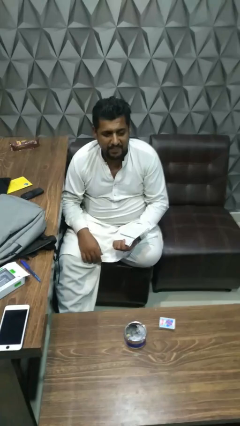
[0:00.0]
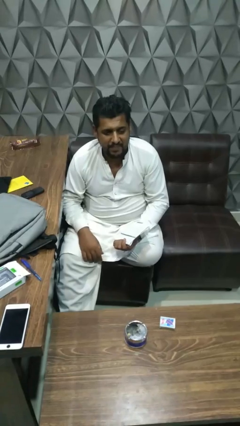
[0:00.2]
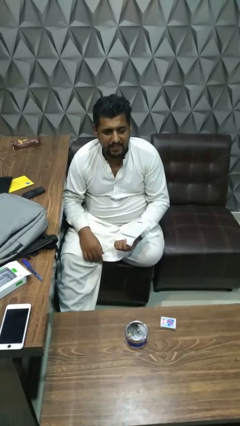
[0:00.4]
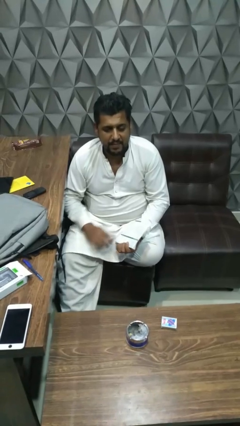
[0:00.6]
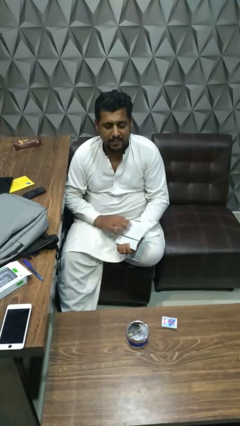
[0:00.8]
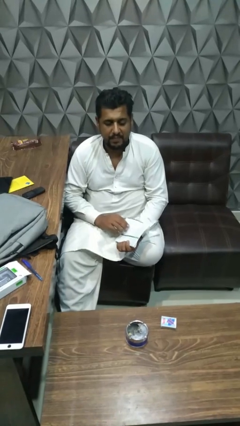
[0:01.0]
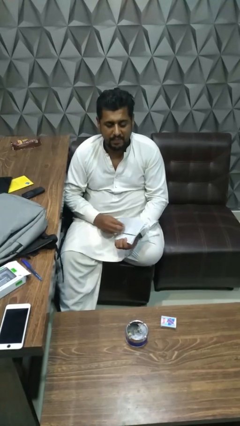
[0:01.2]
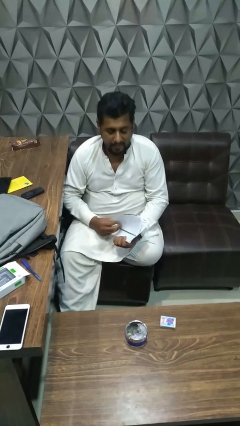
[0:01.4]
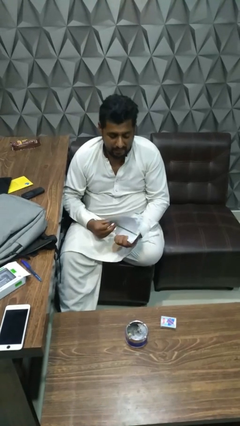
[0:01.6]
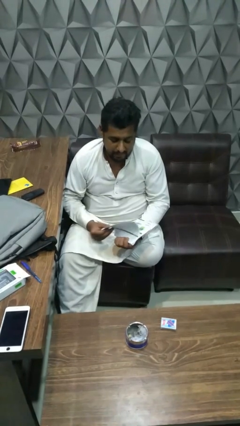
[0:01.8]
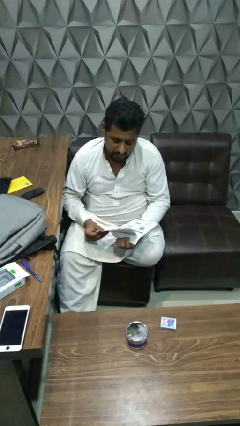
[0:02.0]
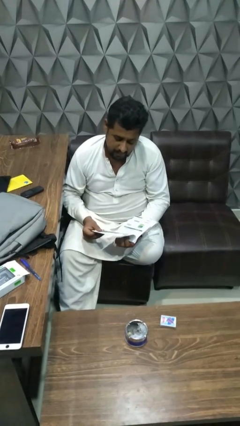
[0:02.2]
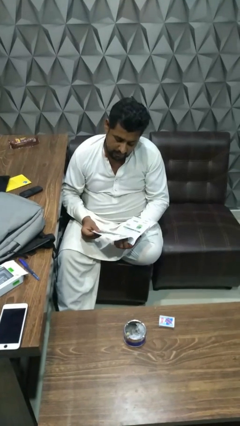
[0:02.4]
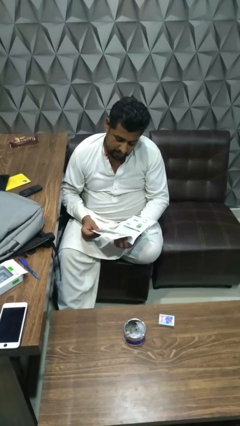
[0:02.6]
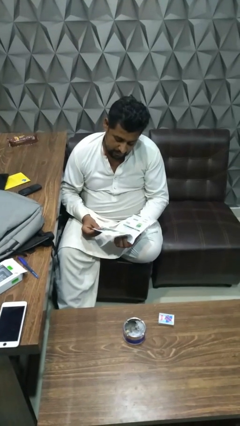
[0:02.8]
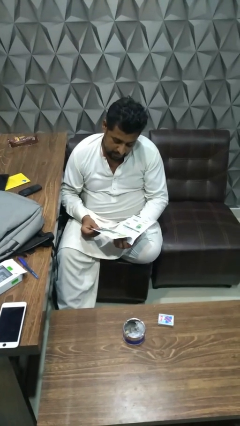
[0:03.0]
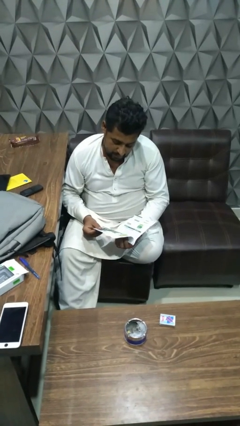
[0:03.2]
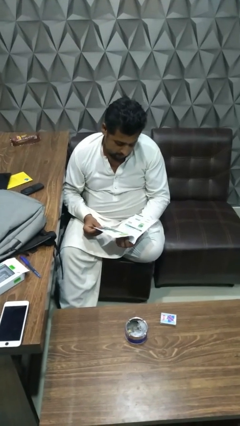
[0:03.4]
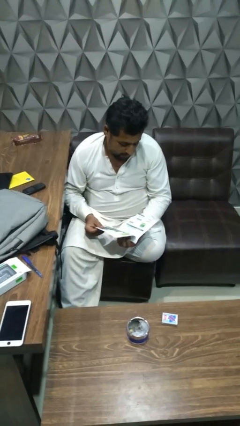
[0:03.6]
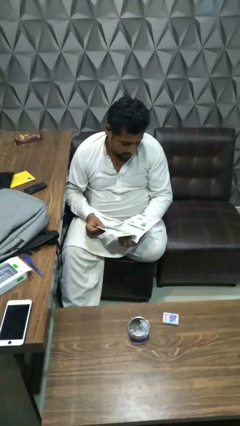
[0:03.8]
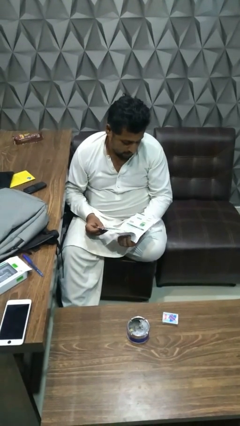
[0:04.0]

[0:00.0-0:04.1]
person reads book

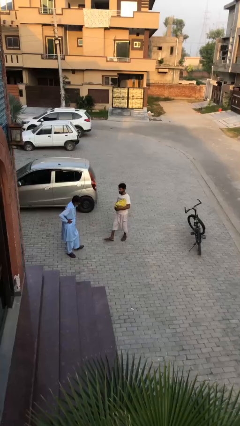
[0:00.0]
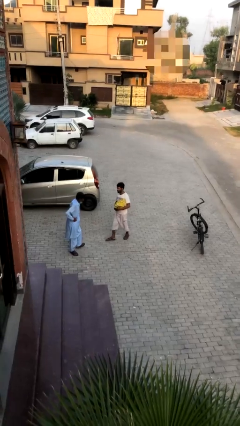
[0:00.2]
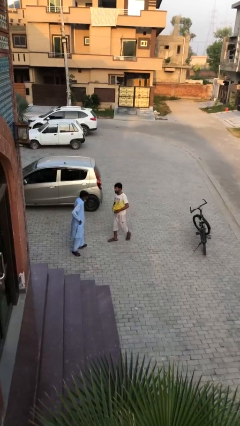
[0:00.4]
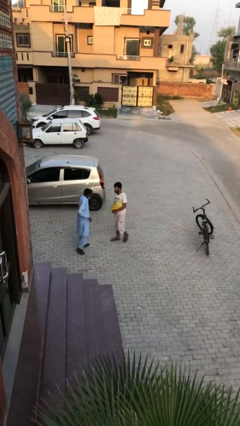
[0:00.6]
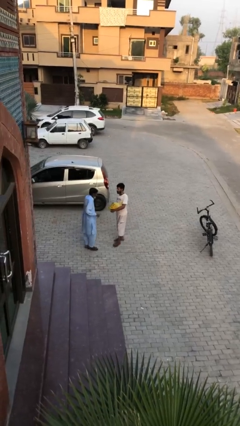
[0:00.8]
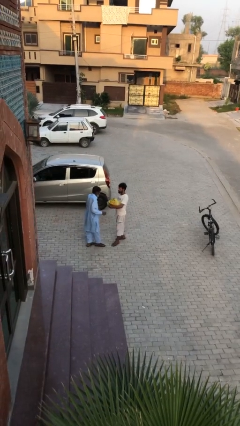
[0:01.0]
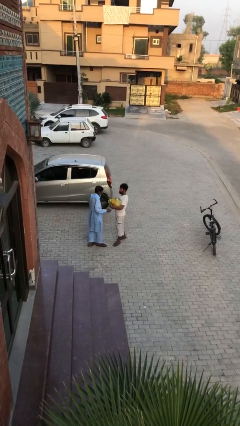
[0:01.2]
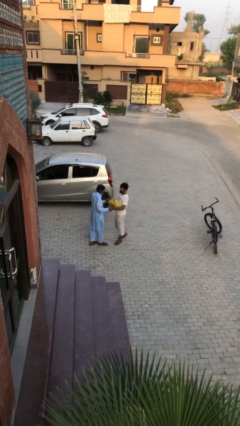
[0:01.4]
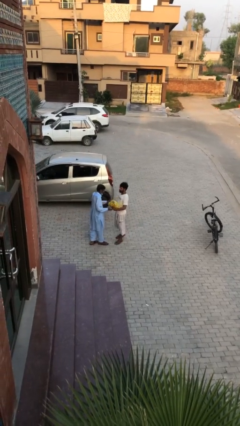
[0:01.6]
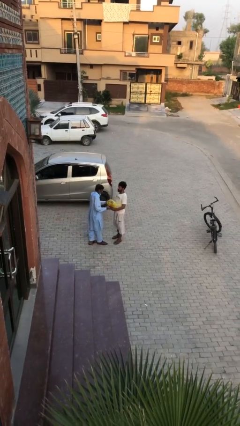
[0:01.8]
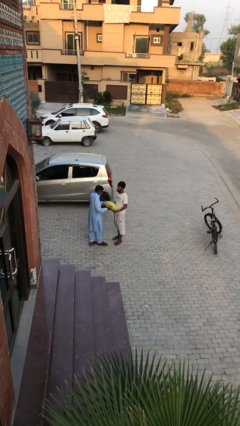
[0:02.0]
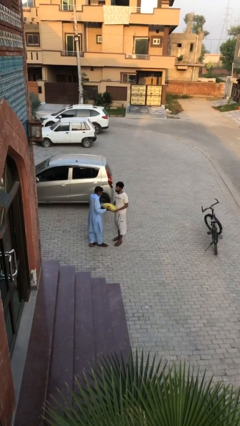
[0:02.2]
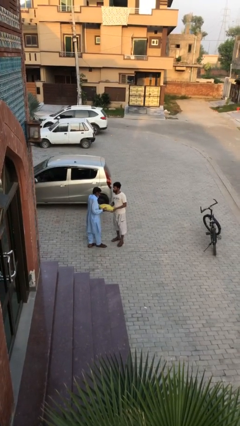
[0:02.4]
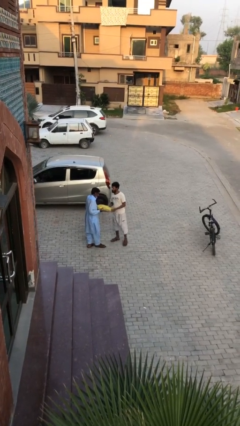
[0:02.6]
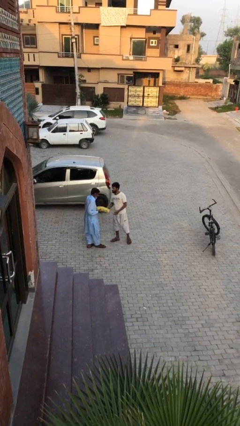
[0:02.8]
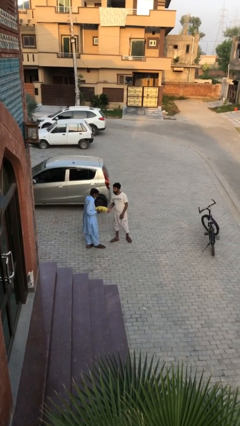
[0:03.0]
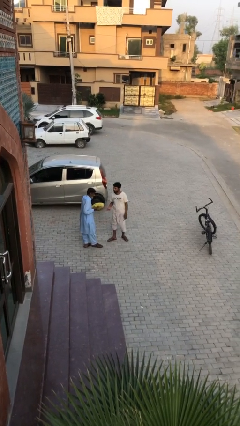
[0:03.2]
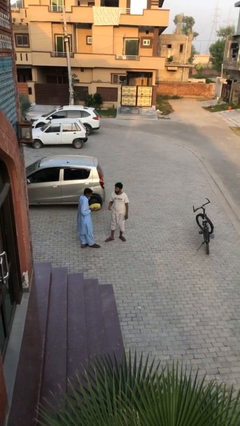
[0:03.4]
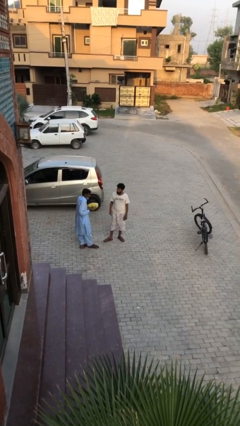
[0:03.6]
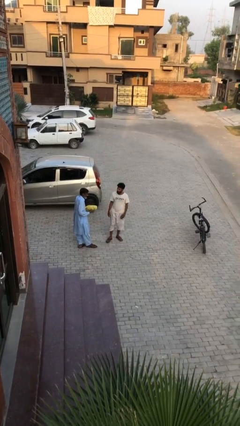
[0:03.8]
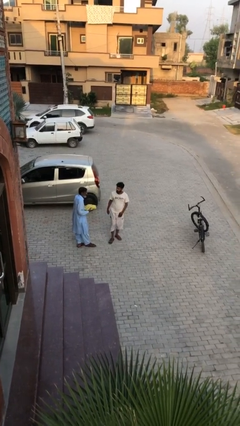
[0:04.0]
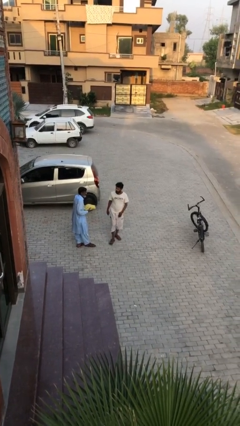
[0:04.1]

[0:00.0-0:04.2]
person transfers object to person

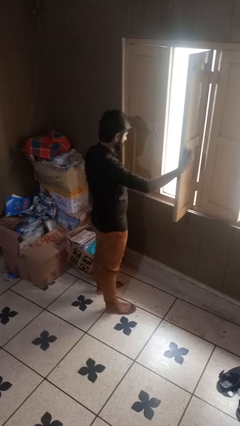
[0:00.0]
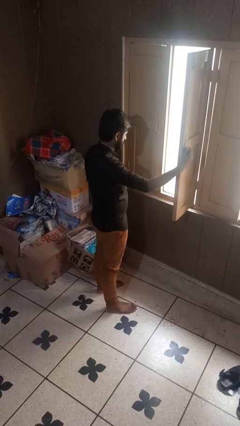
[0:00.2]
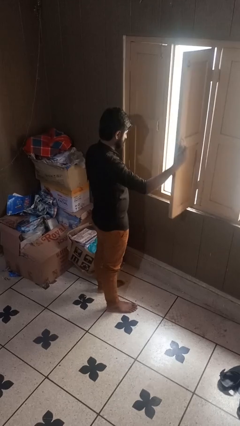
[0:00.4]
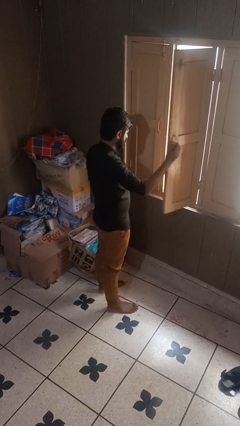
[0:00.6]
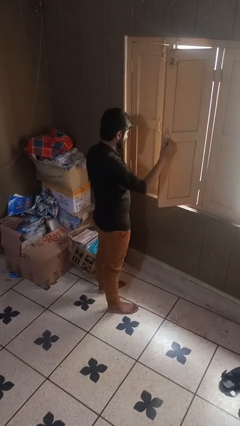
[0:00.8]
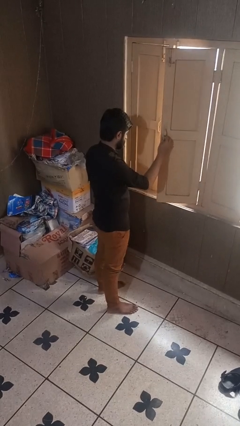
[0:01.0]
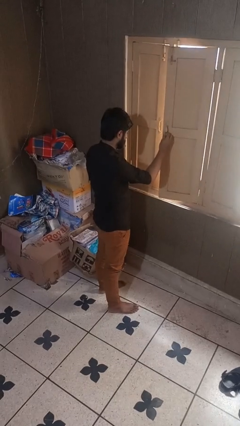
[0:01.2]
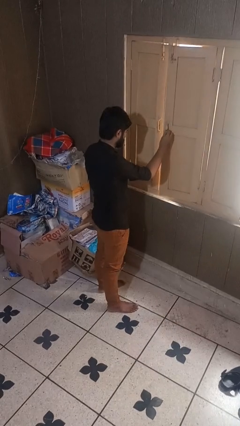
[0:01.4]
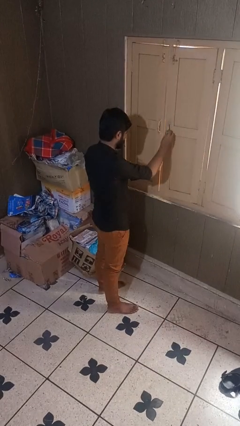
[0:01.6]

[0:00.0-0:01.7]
person closes home window

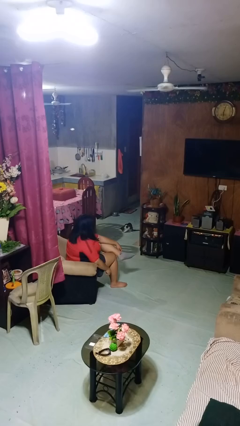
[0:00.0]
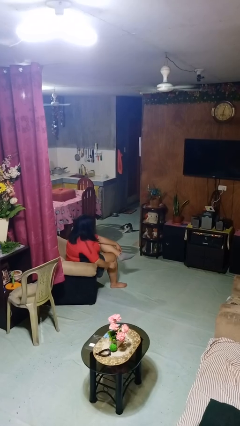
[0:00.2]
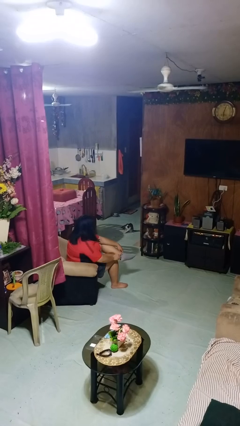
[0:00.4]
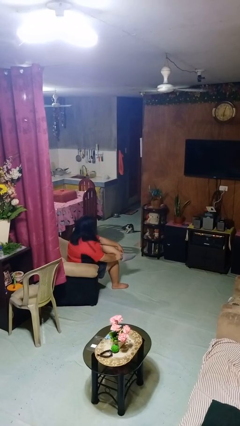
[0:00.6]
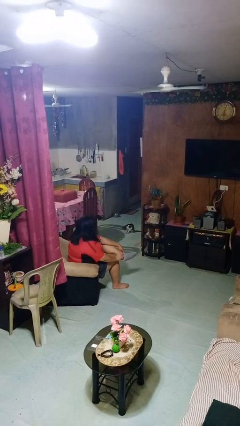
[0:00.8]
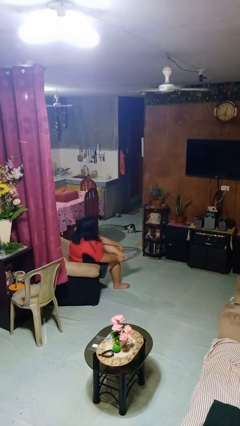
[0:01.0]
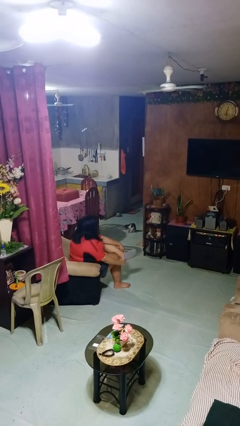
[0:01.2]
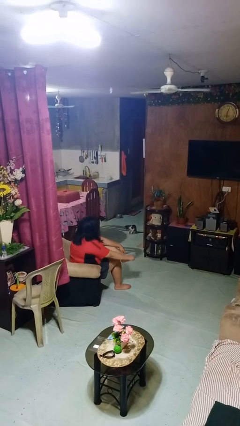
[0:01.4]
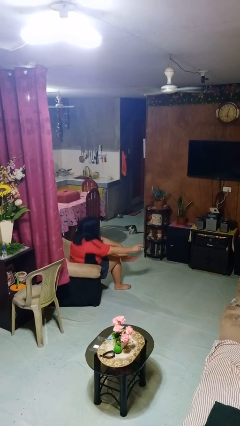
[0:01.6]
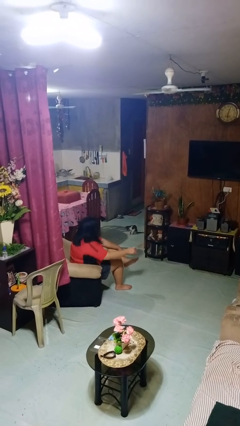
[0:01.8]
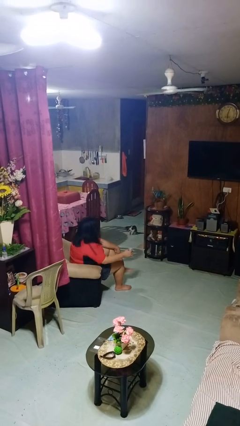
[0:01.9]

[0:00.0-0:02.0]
person takes off socks

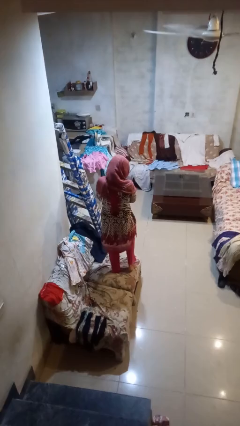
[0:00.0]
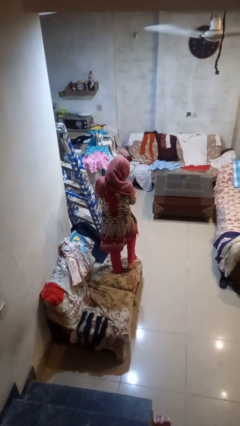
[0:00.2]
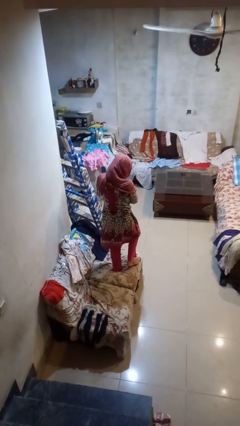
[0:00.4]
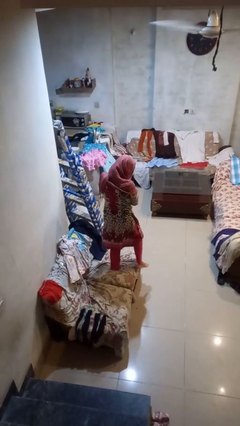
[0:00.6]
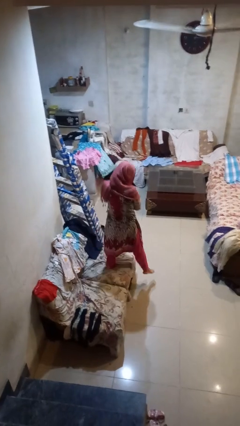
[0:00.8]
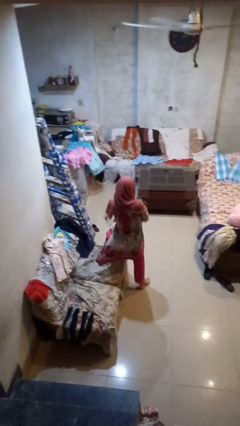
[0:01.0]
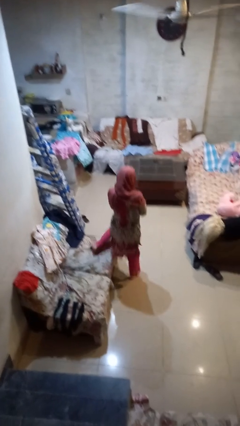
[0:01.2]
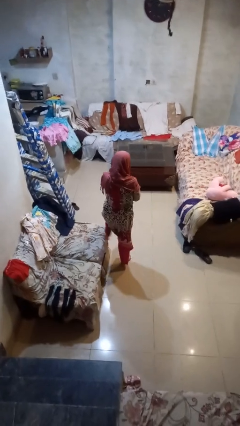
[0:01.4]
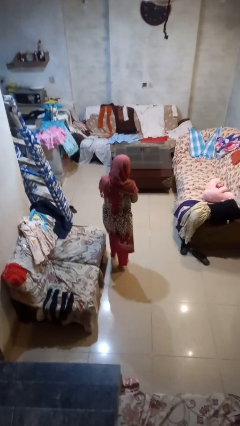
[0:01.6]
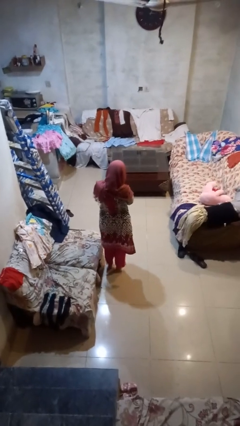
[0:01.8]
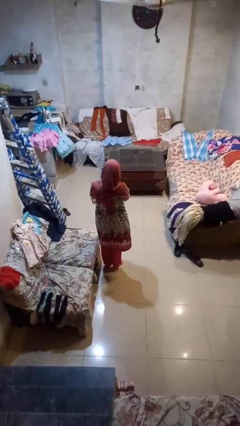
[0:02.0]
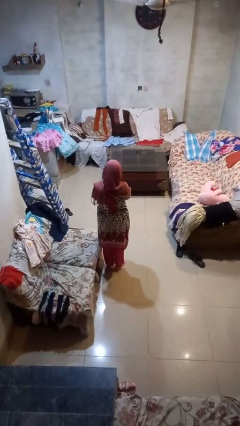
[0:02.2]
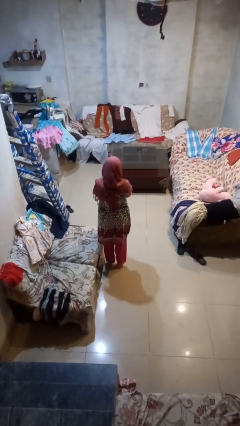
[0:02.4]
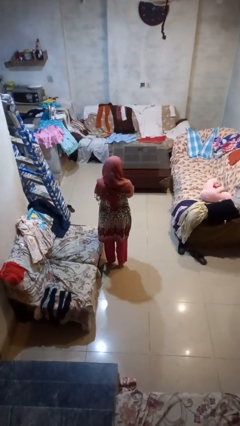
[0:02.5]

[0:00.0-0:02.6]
person climbs off couch

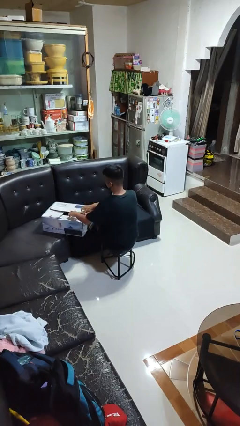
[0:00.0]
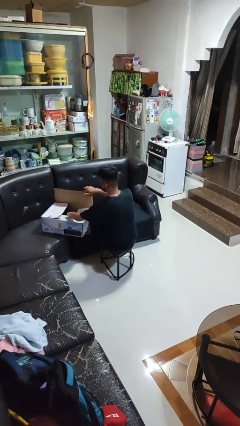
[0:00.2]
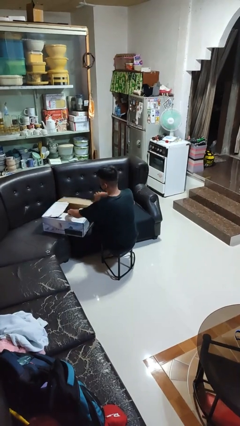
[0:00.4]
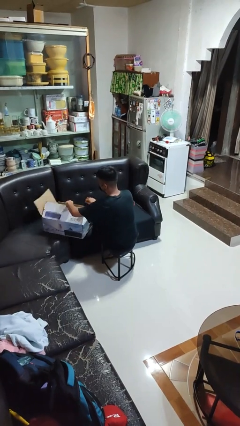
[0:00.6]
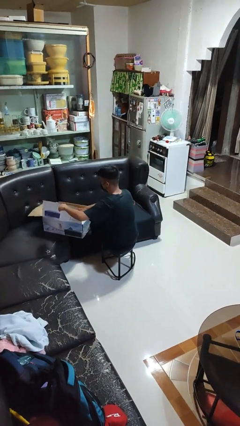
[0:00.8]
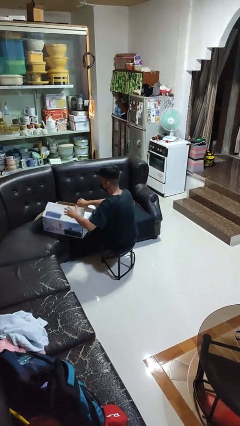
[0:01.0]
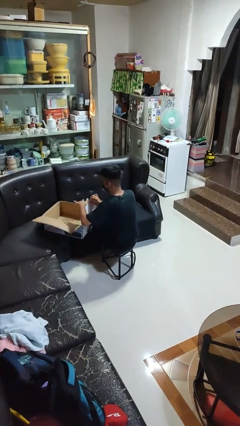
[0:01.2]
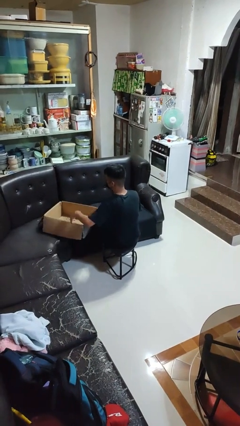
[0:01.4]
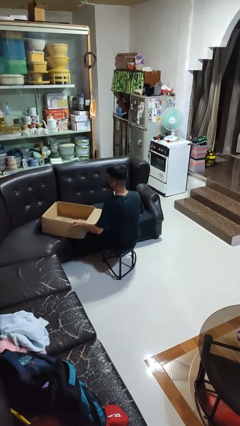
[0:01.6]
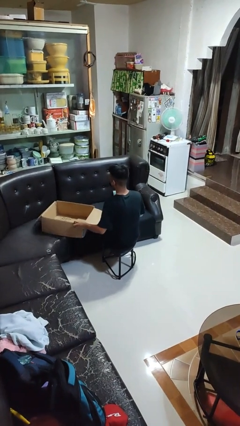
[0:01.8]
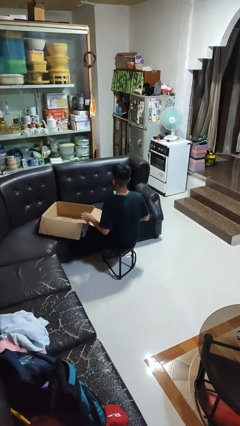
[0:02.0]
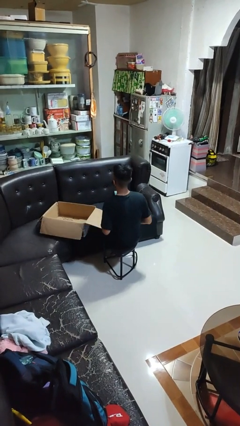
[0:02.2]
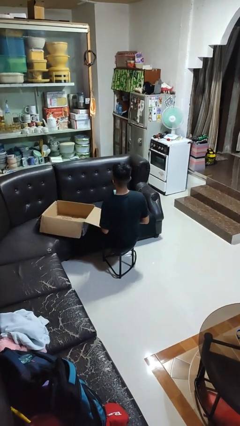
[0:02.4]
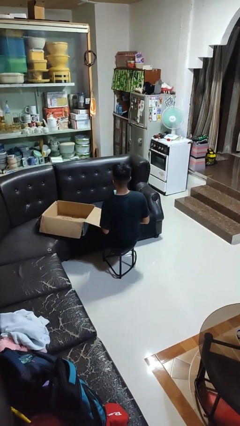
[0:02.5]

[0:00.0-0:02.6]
person opens box
